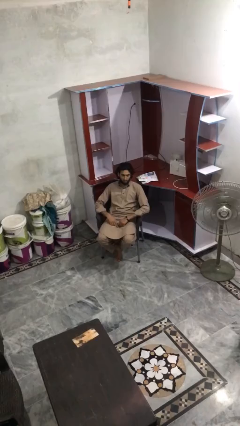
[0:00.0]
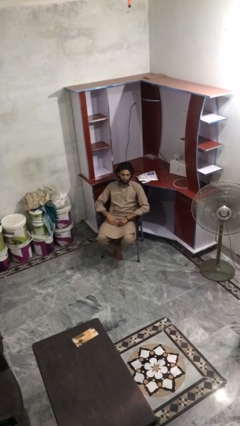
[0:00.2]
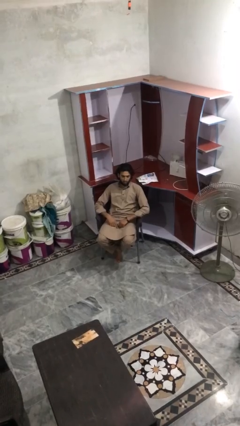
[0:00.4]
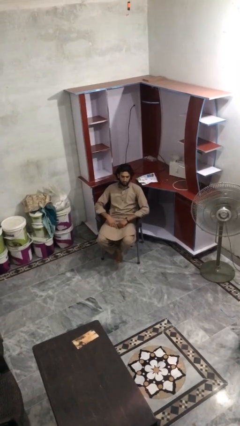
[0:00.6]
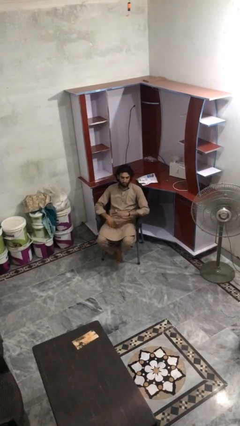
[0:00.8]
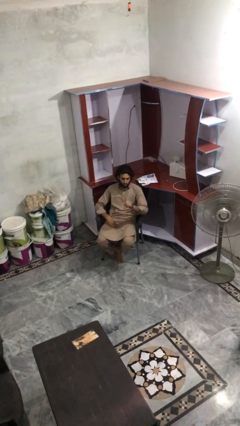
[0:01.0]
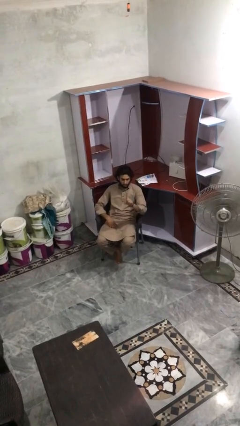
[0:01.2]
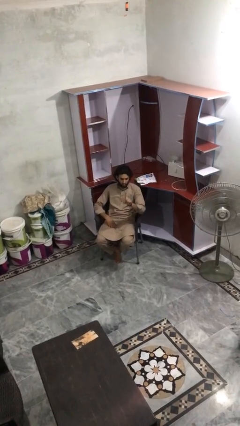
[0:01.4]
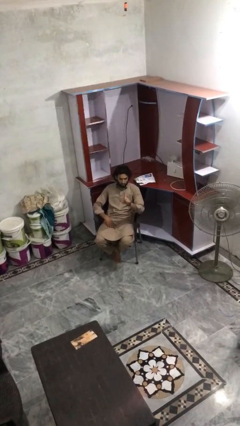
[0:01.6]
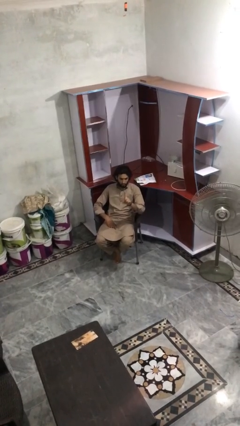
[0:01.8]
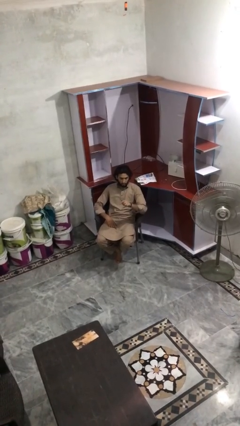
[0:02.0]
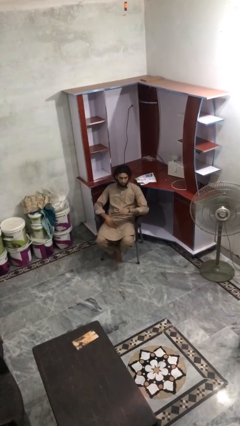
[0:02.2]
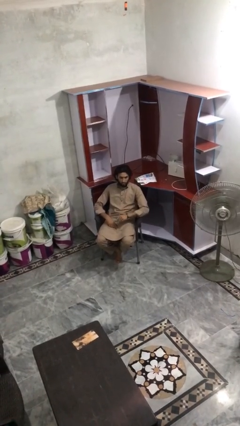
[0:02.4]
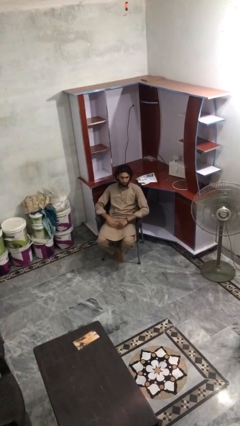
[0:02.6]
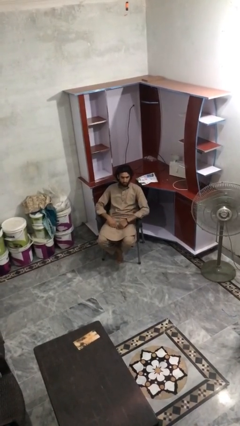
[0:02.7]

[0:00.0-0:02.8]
person gestures number one

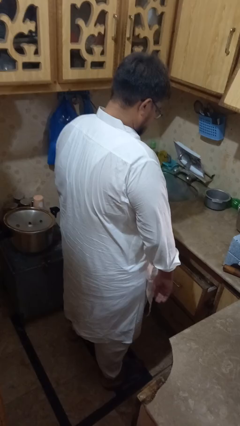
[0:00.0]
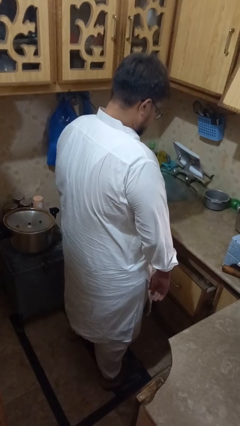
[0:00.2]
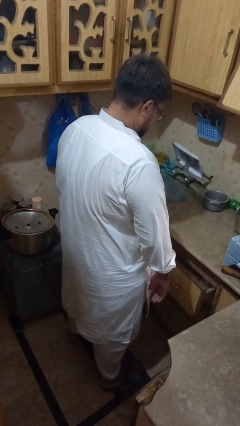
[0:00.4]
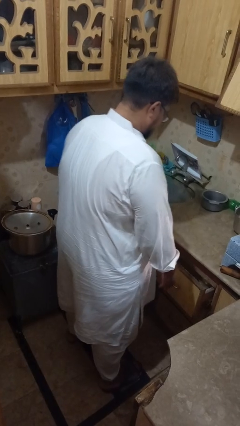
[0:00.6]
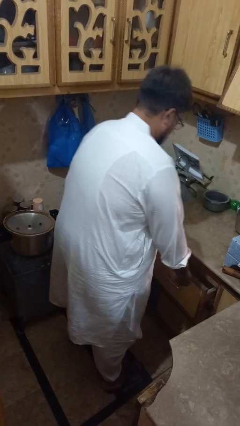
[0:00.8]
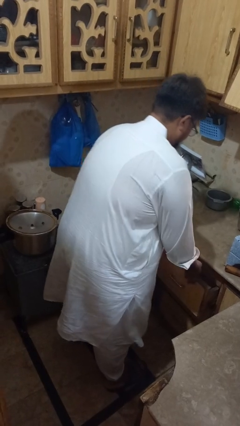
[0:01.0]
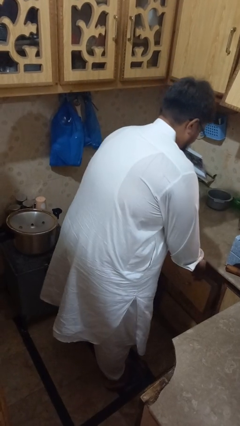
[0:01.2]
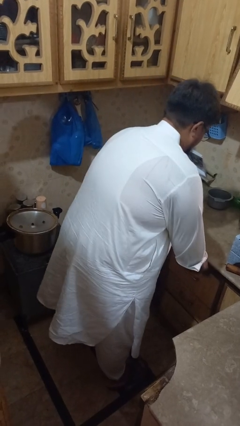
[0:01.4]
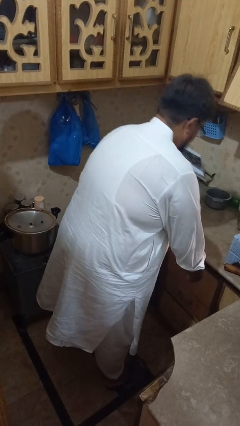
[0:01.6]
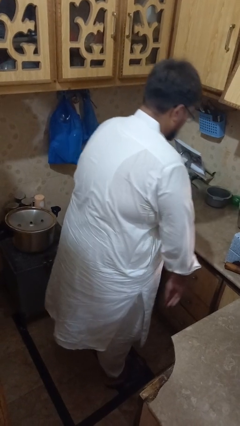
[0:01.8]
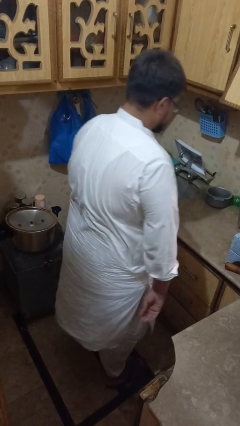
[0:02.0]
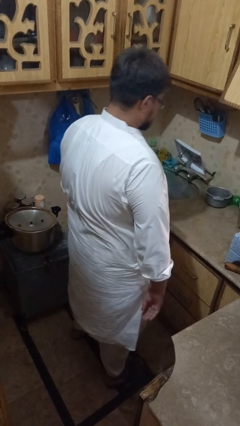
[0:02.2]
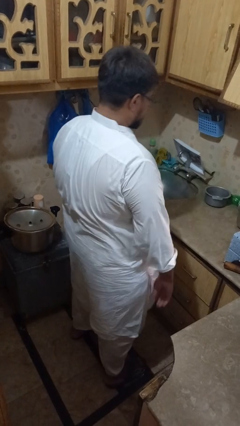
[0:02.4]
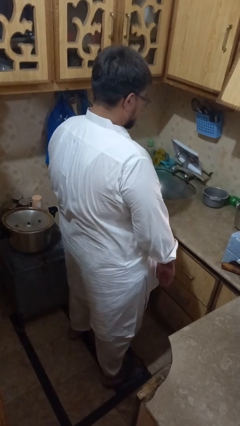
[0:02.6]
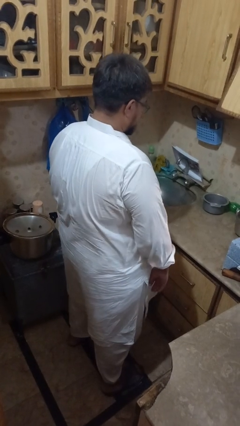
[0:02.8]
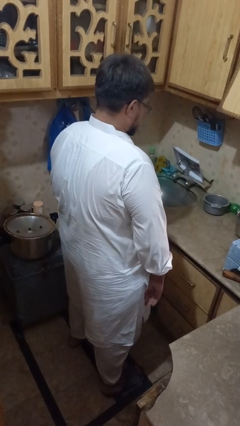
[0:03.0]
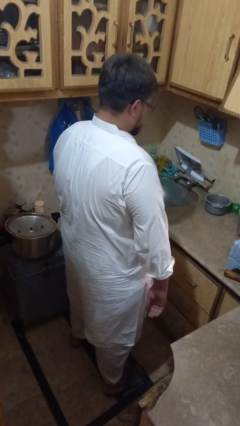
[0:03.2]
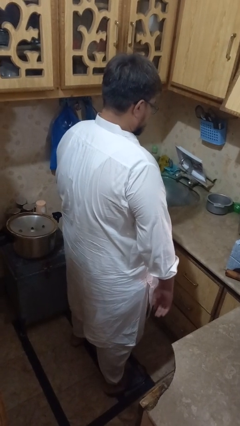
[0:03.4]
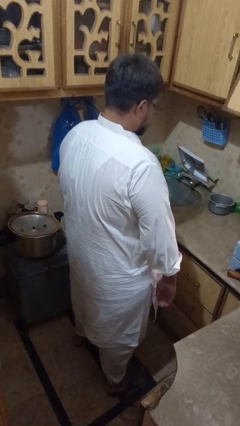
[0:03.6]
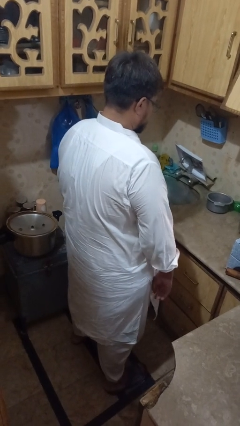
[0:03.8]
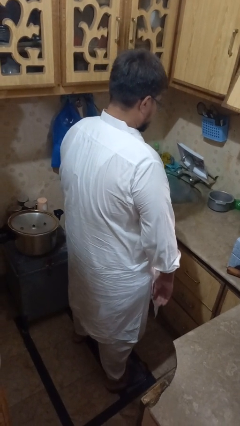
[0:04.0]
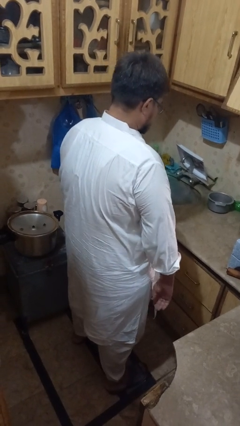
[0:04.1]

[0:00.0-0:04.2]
person closes kitchen drawer

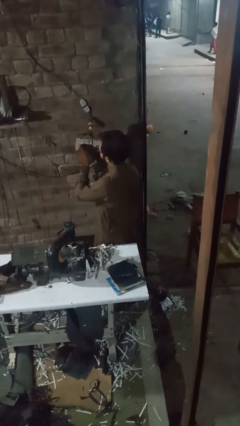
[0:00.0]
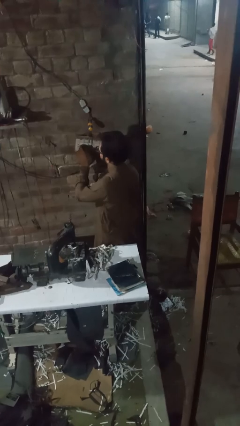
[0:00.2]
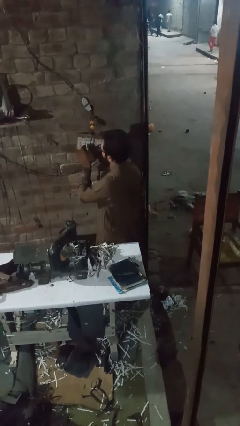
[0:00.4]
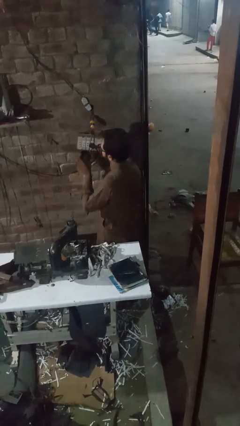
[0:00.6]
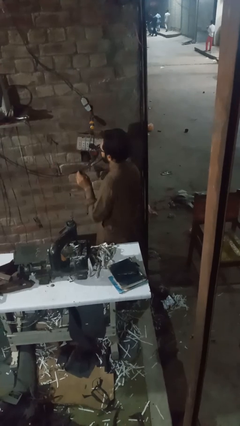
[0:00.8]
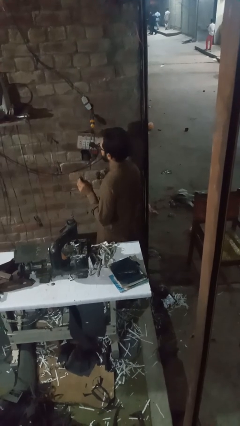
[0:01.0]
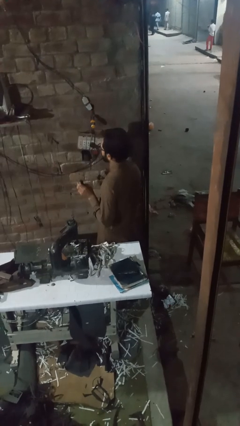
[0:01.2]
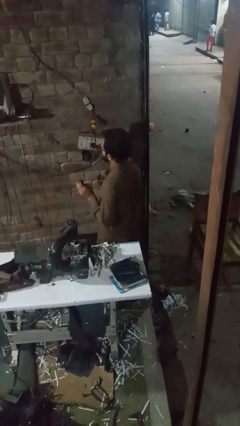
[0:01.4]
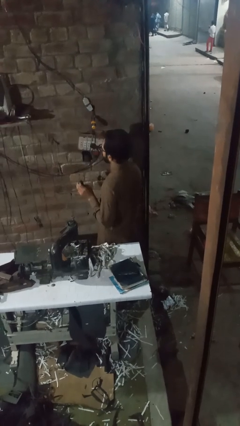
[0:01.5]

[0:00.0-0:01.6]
person unplugs from electrical socket

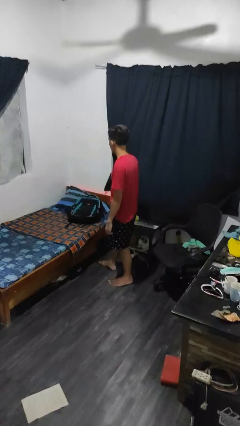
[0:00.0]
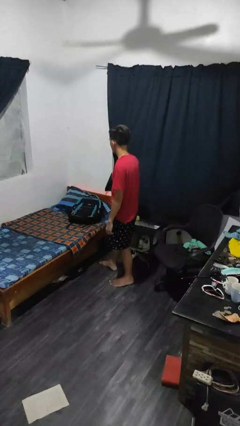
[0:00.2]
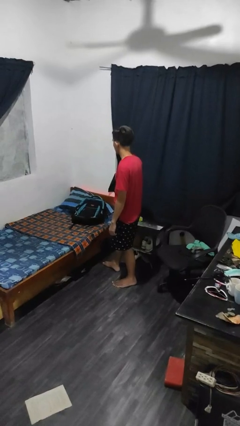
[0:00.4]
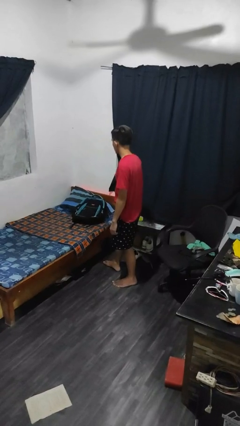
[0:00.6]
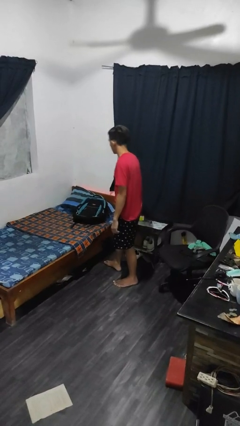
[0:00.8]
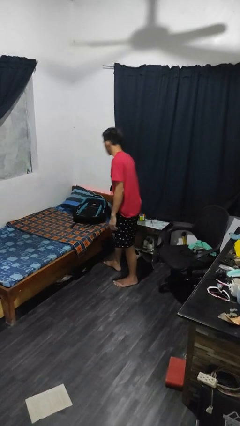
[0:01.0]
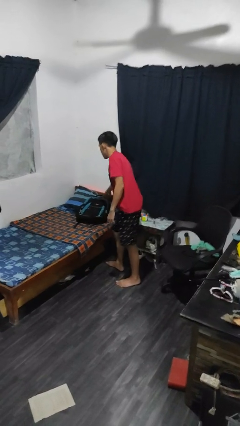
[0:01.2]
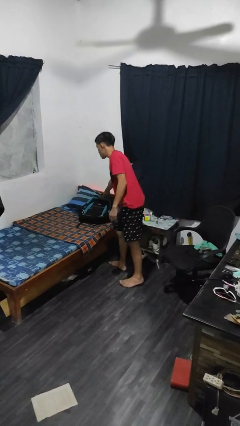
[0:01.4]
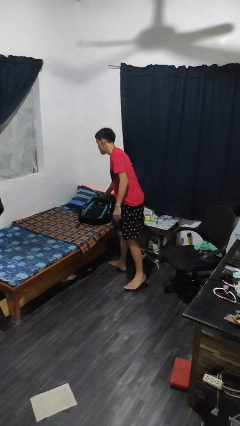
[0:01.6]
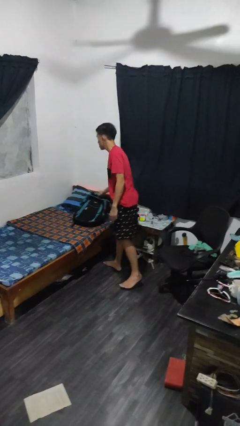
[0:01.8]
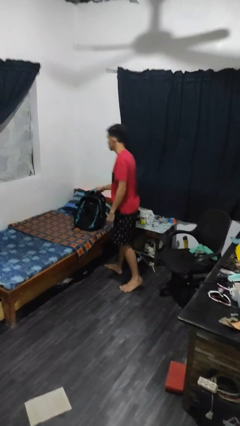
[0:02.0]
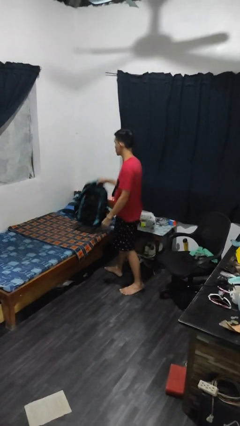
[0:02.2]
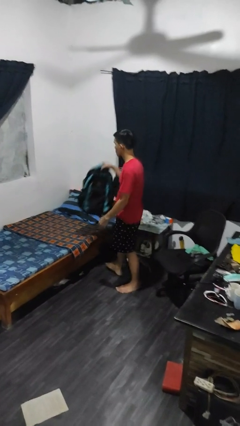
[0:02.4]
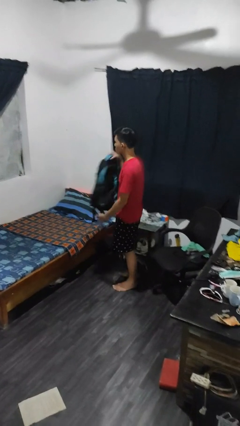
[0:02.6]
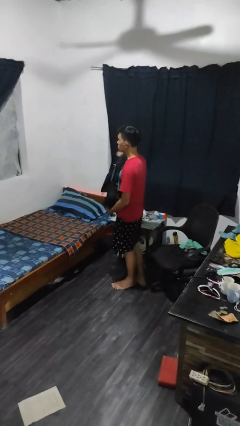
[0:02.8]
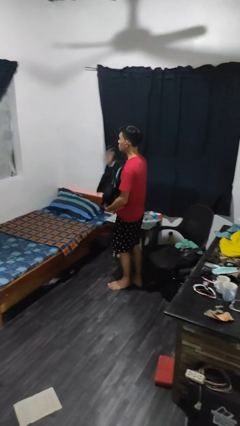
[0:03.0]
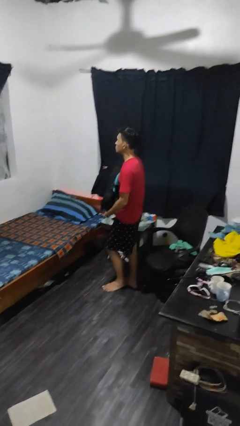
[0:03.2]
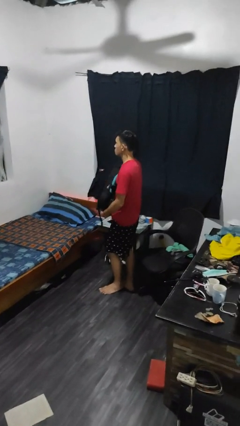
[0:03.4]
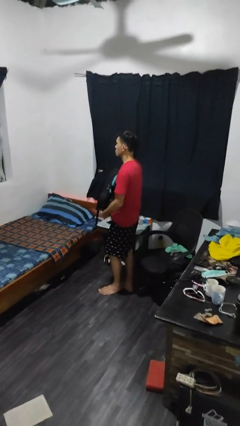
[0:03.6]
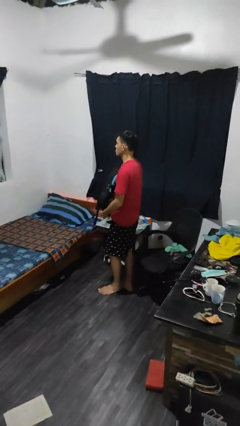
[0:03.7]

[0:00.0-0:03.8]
person picks up object from bed

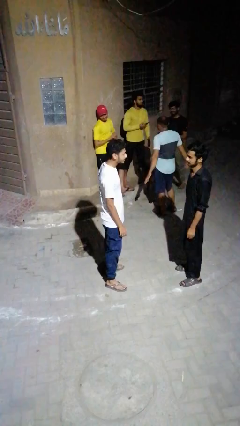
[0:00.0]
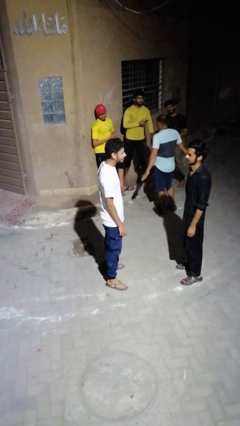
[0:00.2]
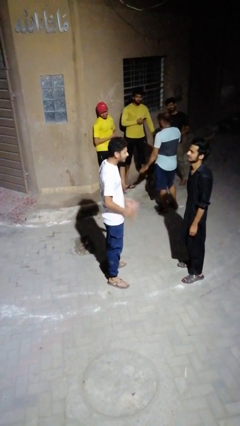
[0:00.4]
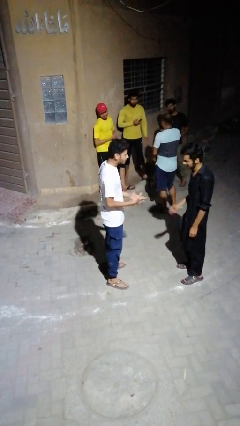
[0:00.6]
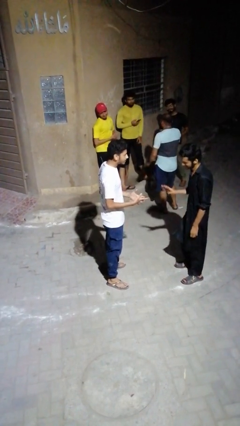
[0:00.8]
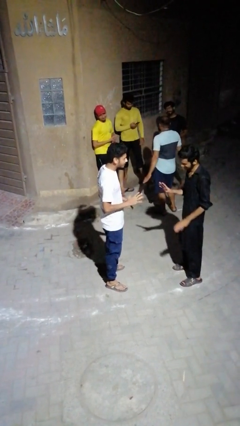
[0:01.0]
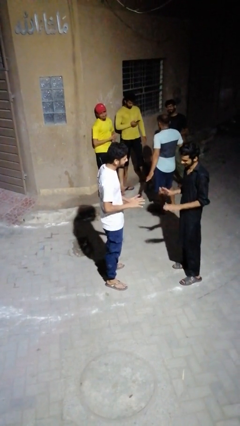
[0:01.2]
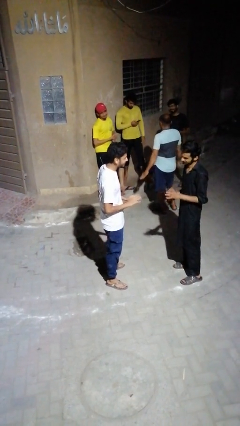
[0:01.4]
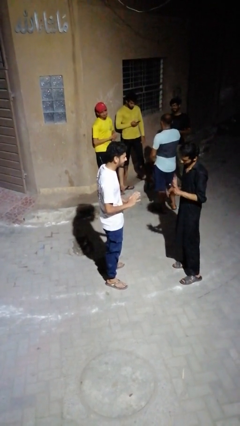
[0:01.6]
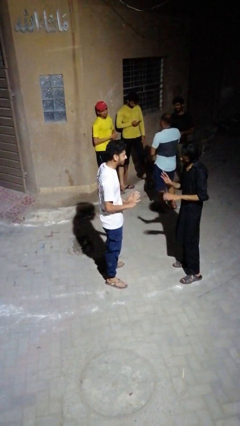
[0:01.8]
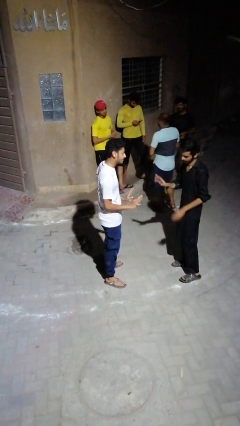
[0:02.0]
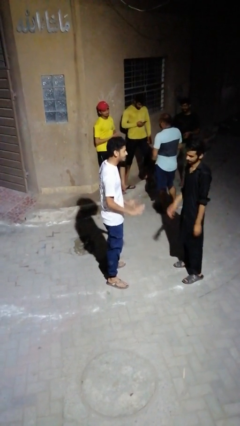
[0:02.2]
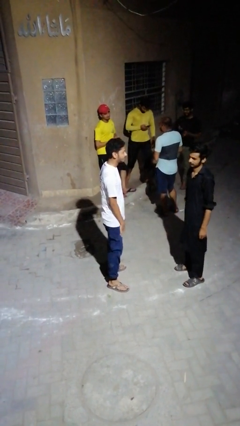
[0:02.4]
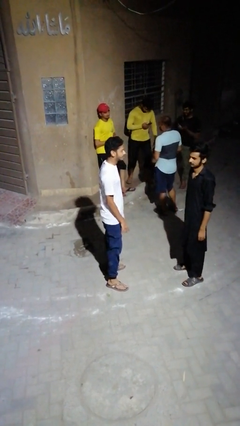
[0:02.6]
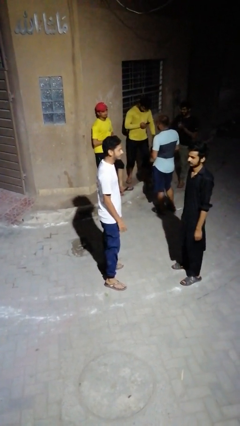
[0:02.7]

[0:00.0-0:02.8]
person talks to person

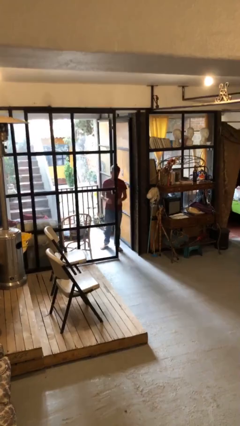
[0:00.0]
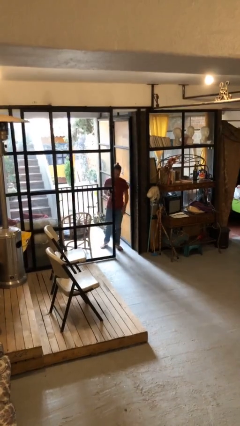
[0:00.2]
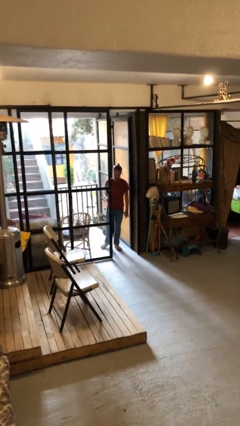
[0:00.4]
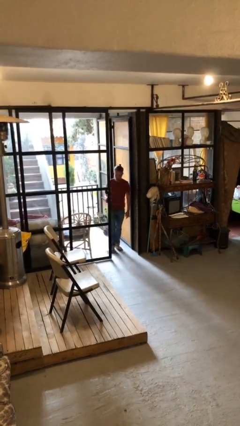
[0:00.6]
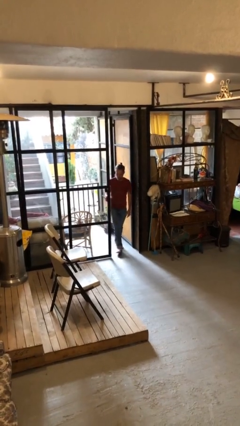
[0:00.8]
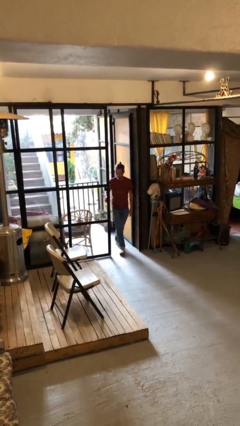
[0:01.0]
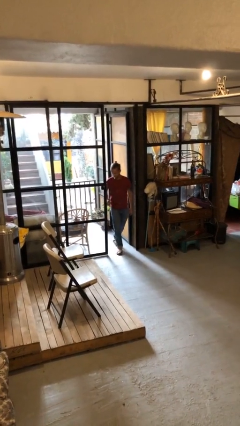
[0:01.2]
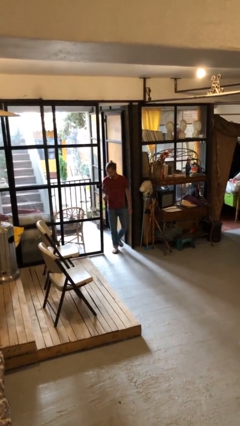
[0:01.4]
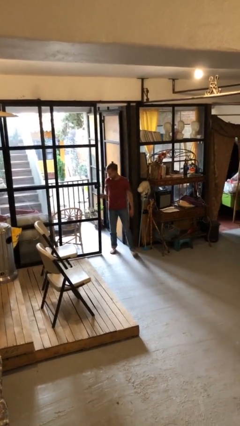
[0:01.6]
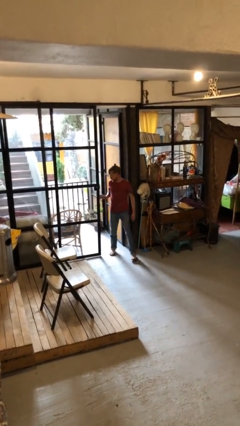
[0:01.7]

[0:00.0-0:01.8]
person enters scene through structure

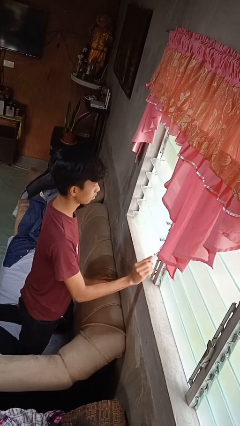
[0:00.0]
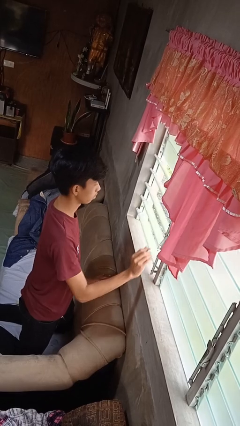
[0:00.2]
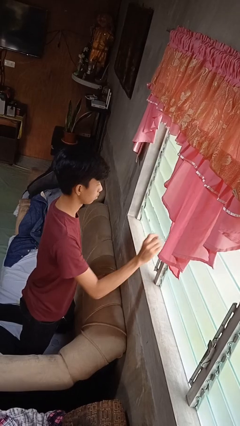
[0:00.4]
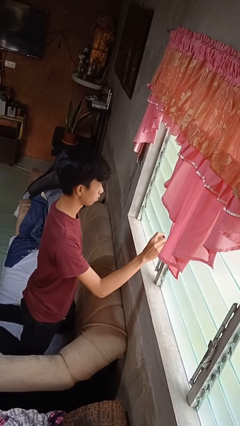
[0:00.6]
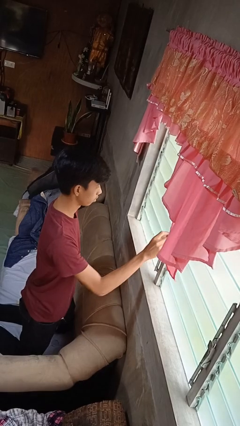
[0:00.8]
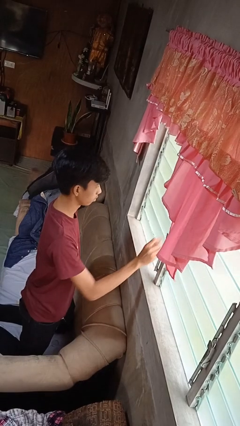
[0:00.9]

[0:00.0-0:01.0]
person closes home window
